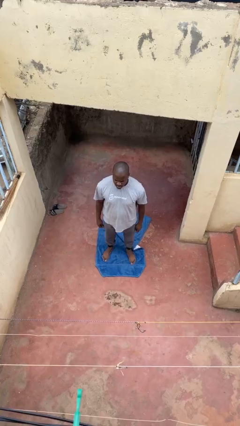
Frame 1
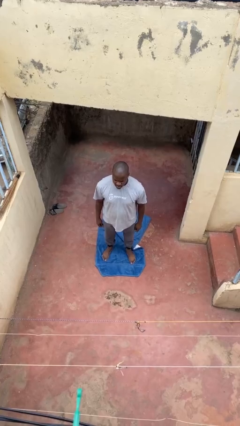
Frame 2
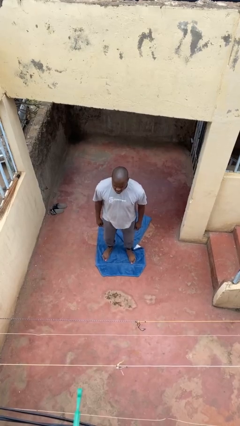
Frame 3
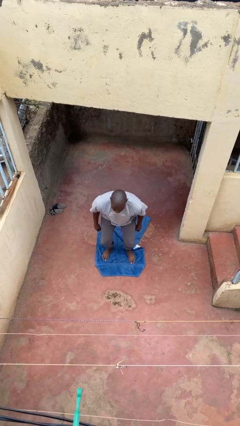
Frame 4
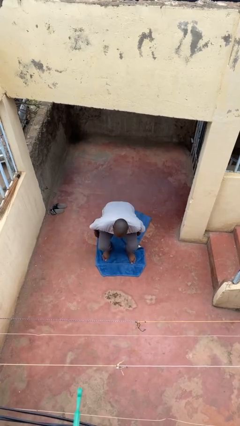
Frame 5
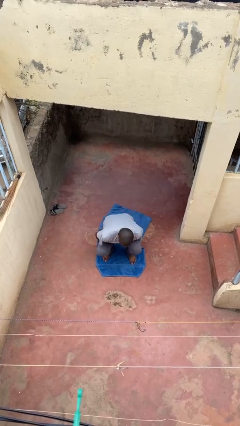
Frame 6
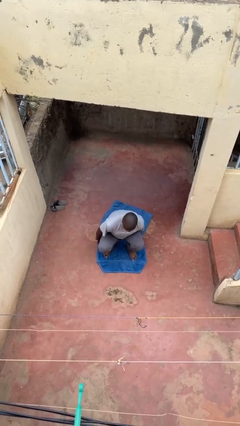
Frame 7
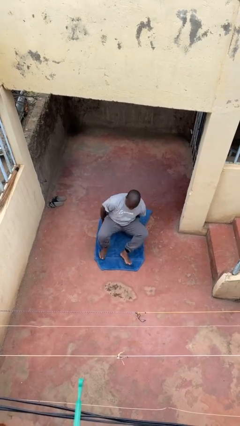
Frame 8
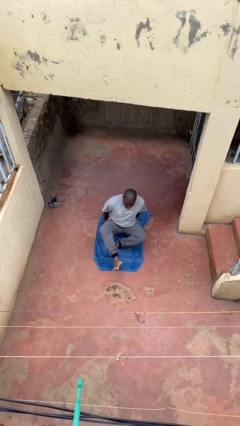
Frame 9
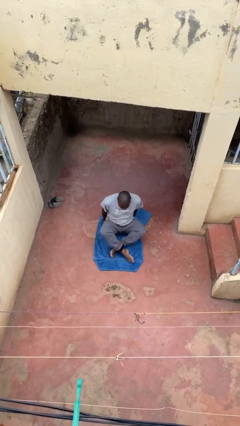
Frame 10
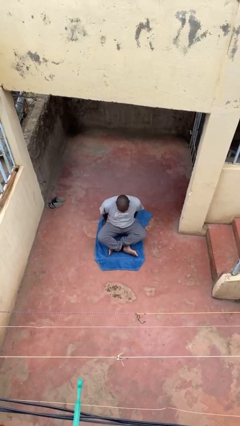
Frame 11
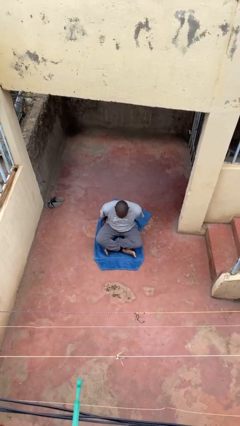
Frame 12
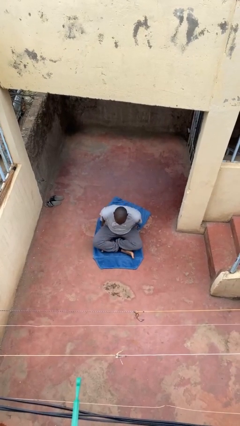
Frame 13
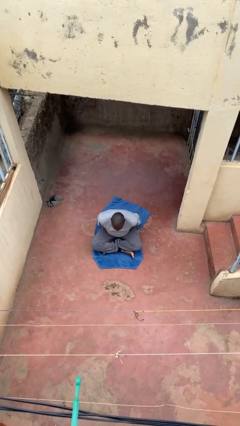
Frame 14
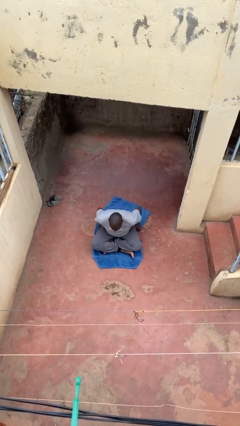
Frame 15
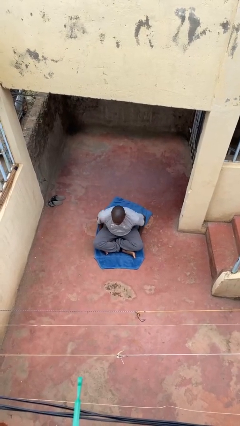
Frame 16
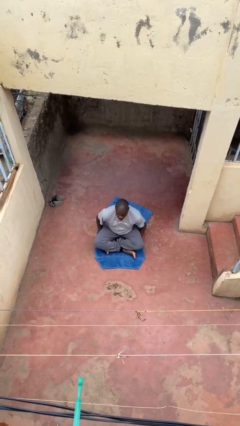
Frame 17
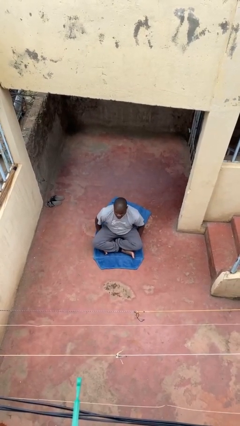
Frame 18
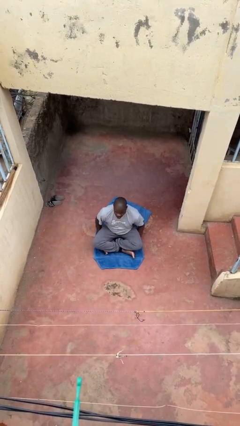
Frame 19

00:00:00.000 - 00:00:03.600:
person sits crisscross

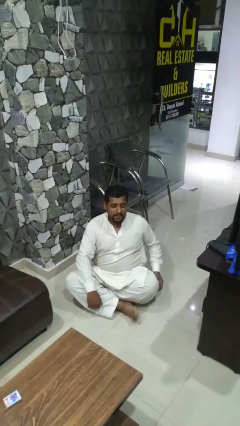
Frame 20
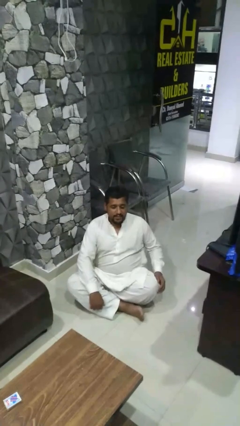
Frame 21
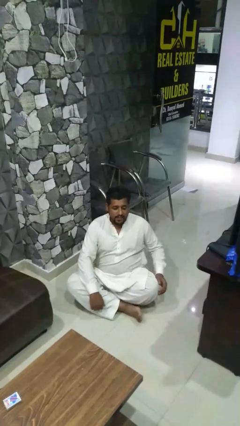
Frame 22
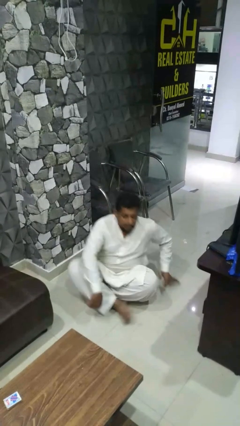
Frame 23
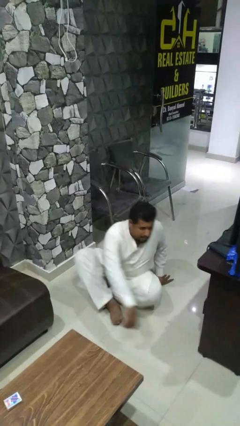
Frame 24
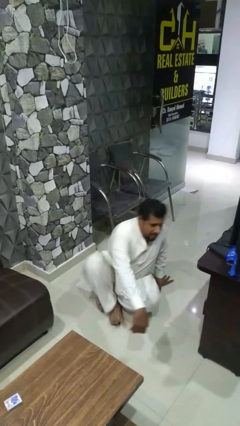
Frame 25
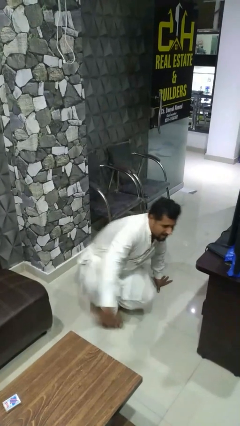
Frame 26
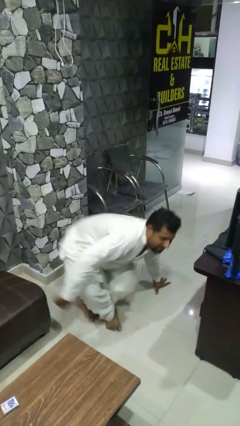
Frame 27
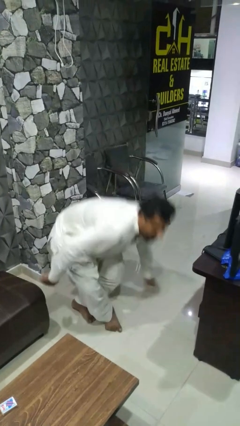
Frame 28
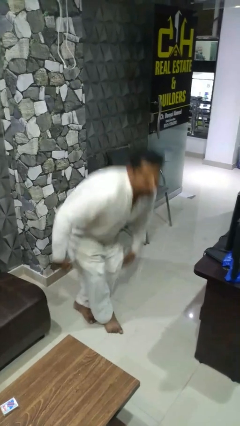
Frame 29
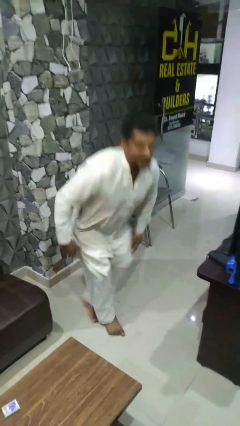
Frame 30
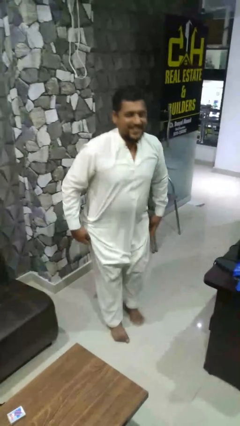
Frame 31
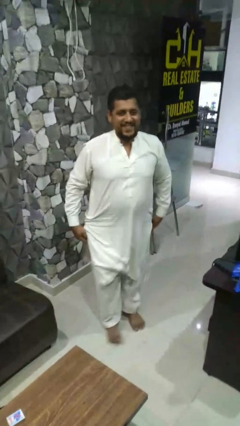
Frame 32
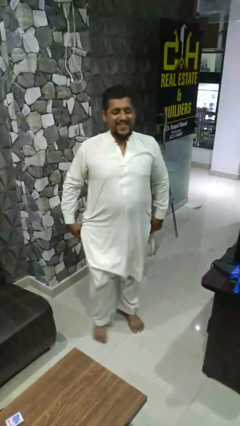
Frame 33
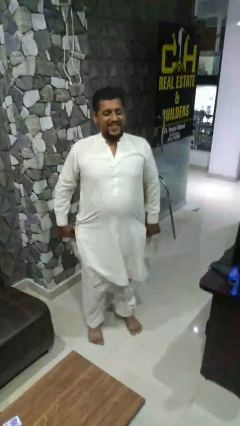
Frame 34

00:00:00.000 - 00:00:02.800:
person stands up from floor

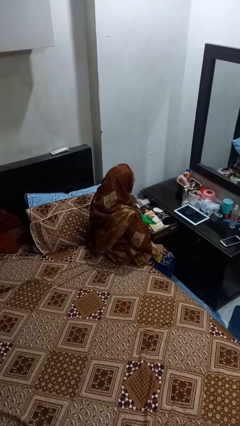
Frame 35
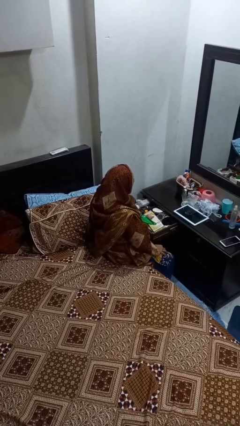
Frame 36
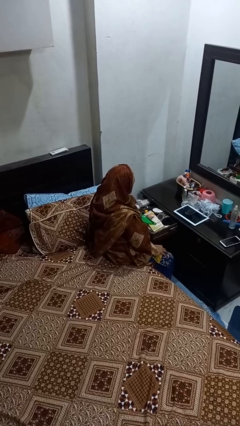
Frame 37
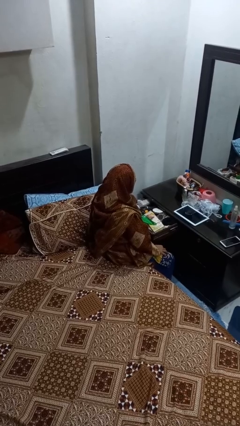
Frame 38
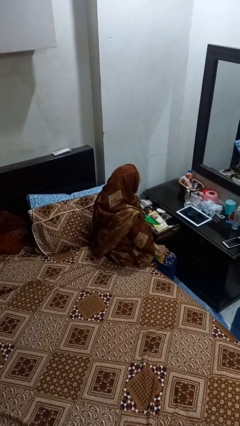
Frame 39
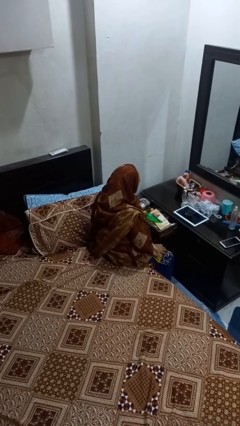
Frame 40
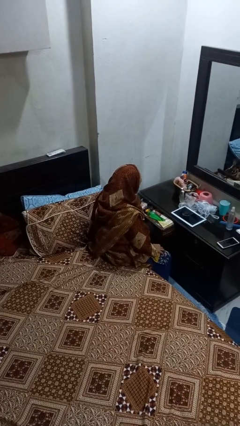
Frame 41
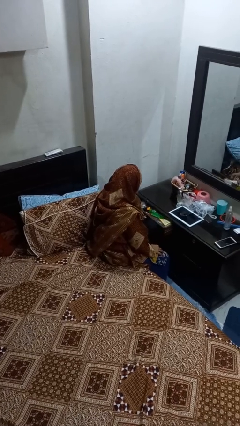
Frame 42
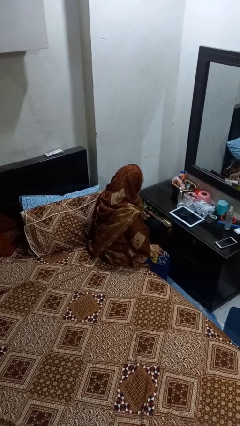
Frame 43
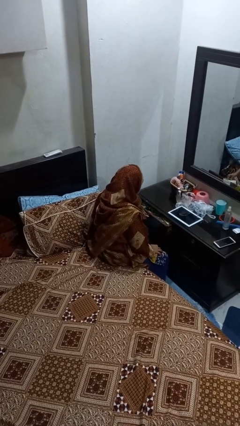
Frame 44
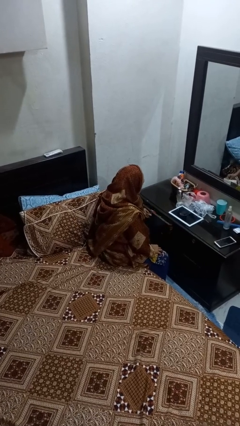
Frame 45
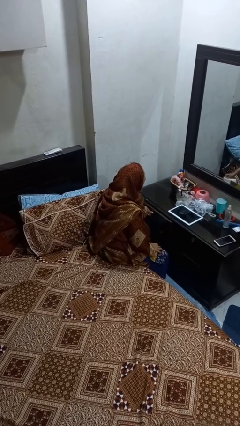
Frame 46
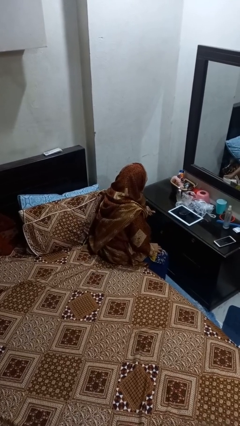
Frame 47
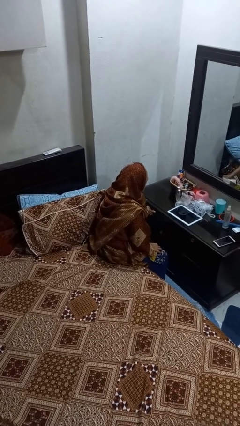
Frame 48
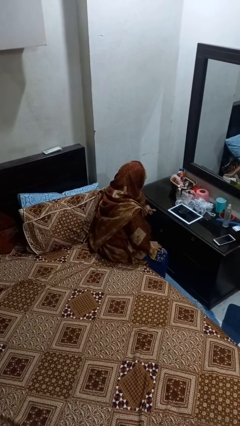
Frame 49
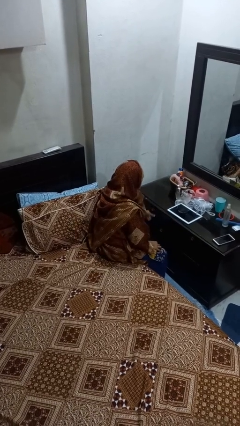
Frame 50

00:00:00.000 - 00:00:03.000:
person closes dresser drawer

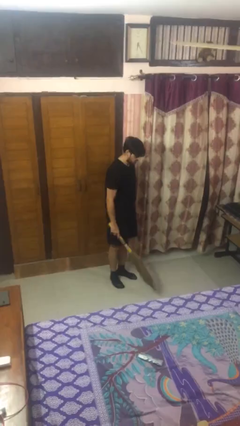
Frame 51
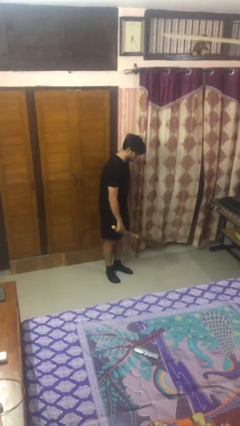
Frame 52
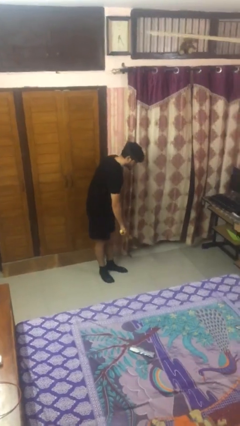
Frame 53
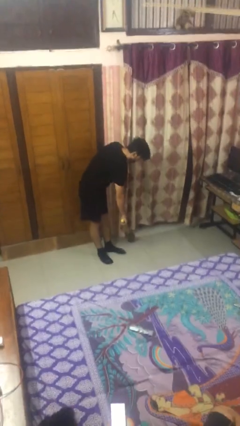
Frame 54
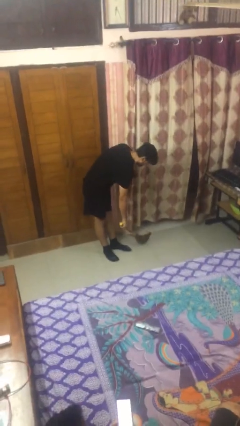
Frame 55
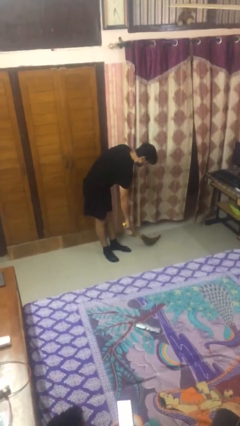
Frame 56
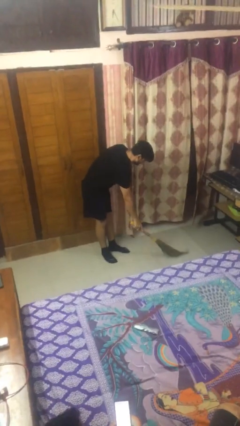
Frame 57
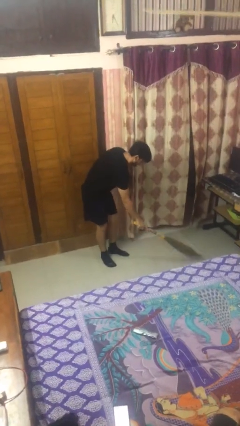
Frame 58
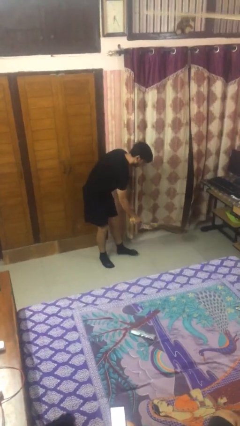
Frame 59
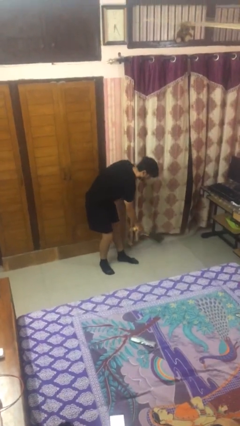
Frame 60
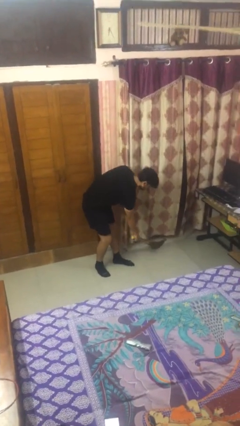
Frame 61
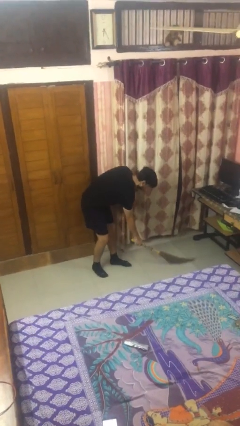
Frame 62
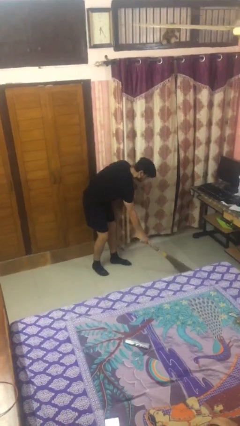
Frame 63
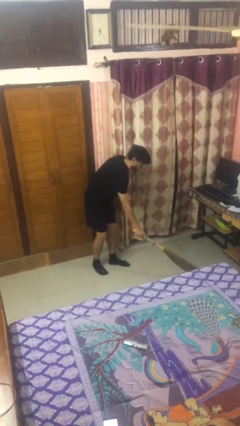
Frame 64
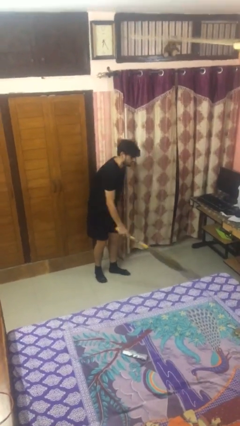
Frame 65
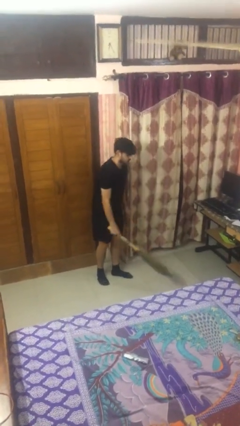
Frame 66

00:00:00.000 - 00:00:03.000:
person sweeps floor

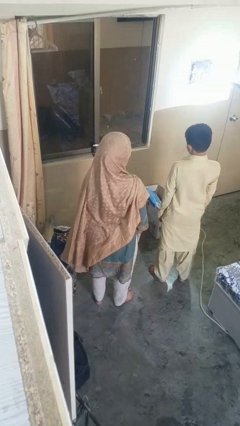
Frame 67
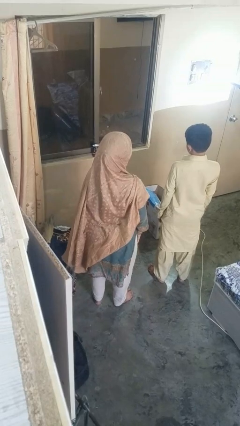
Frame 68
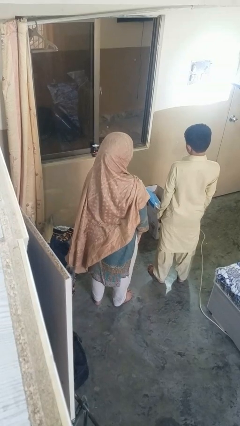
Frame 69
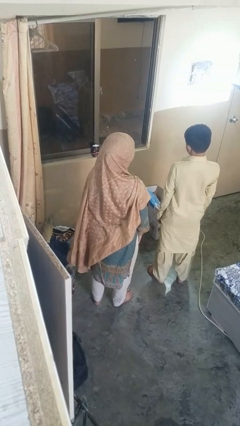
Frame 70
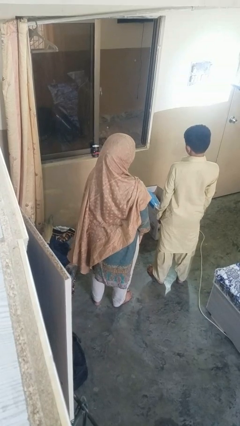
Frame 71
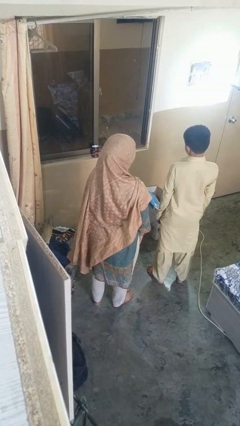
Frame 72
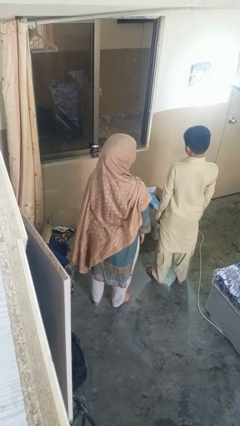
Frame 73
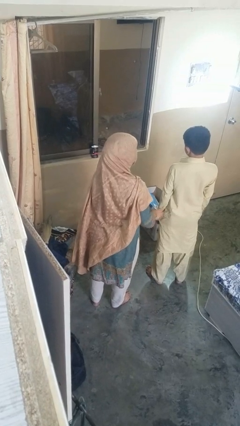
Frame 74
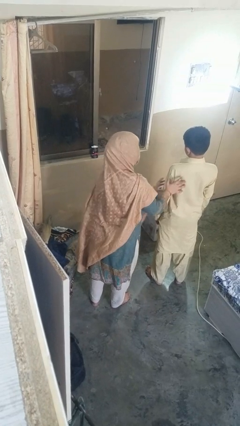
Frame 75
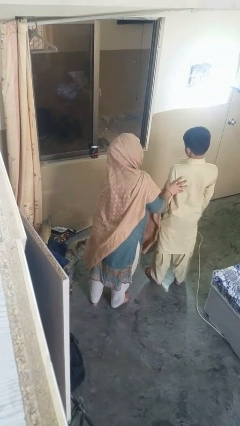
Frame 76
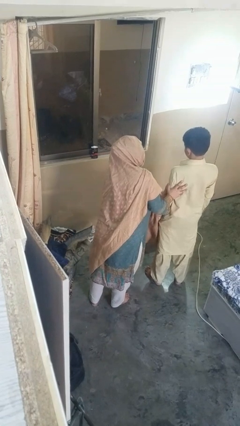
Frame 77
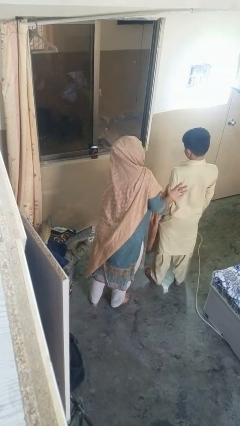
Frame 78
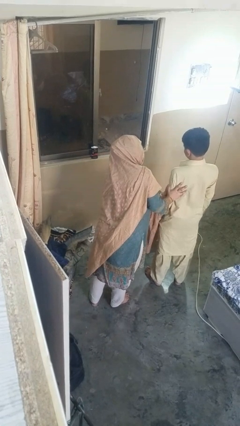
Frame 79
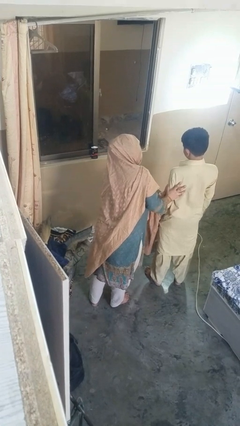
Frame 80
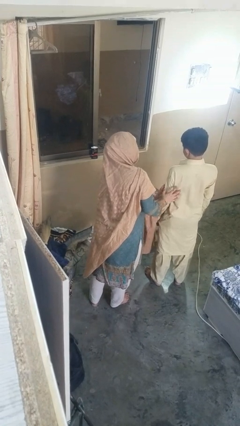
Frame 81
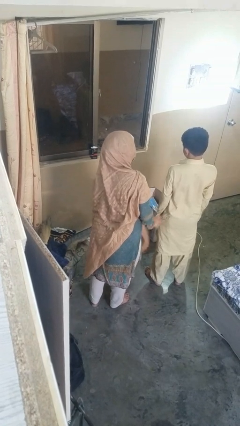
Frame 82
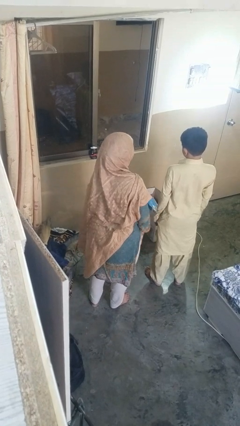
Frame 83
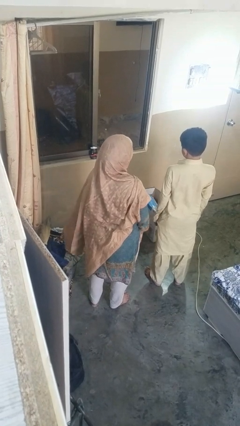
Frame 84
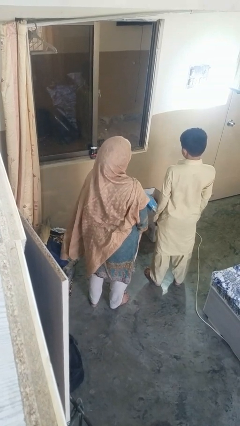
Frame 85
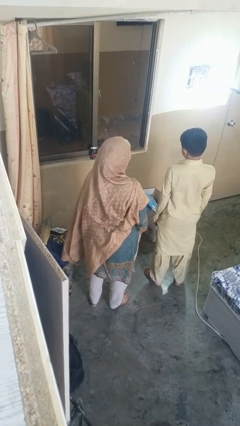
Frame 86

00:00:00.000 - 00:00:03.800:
person laughs with person

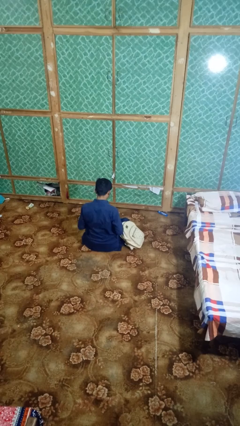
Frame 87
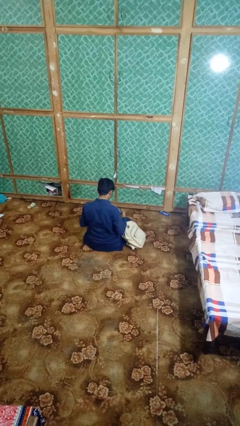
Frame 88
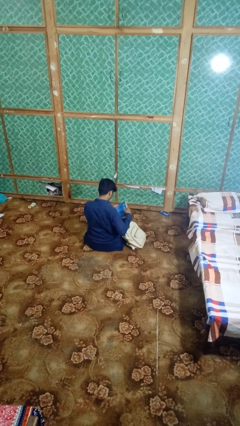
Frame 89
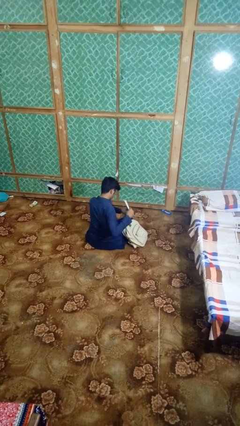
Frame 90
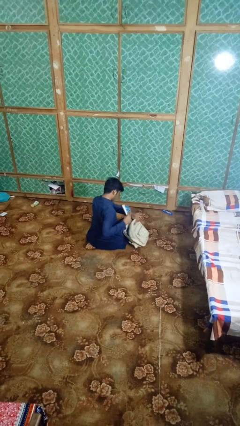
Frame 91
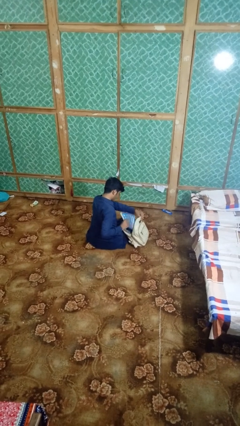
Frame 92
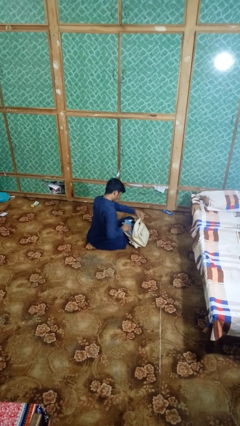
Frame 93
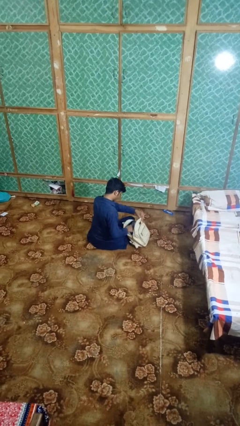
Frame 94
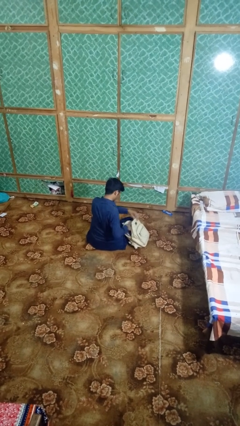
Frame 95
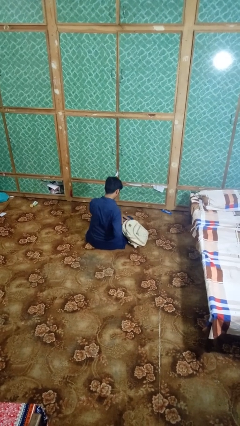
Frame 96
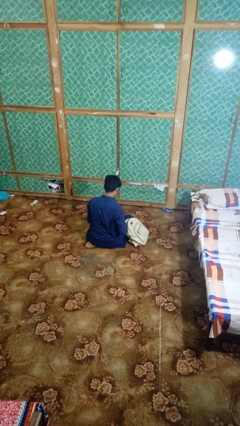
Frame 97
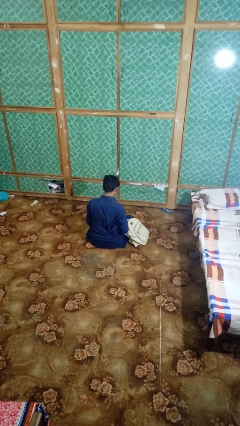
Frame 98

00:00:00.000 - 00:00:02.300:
person puts object into backpack
